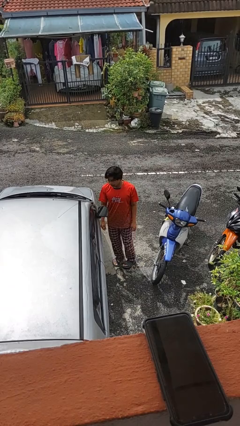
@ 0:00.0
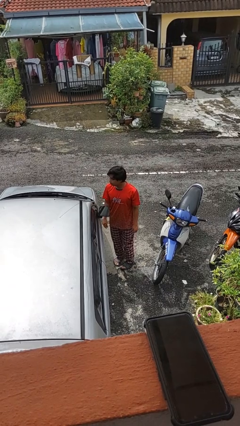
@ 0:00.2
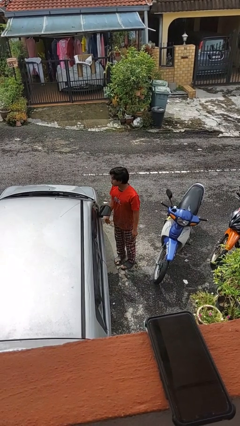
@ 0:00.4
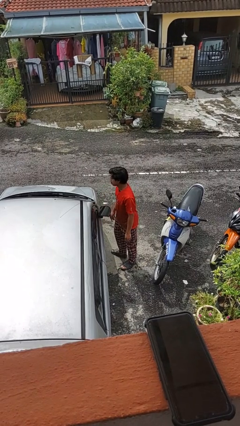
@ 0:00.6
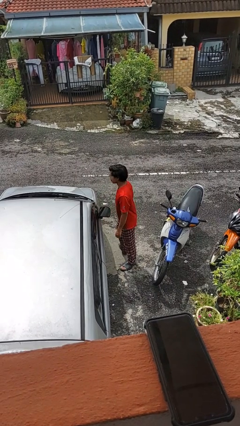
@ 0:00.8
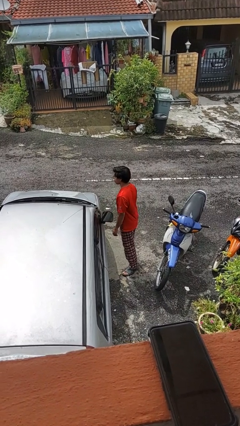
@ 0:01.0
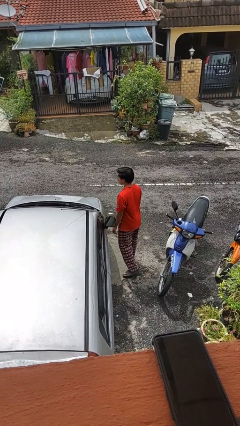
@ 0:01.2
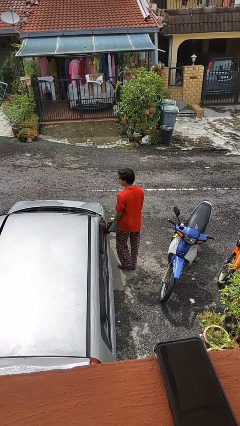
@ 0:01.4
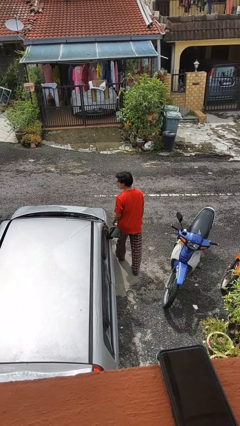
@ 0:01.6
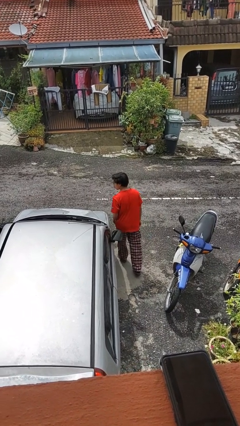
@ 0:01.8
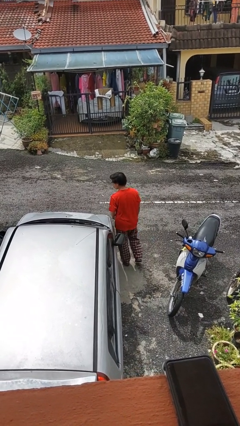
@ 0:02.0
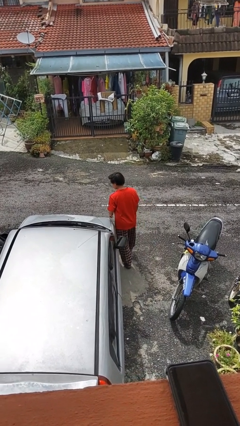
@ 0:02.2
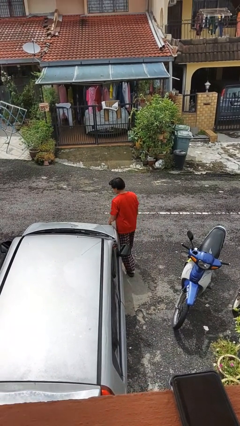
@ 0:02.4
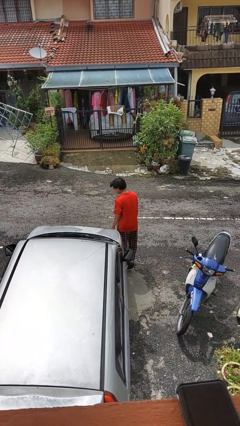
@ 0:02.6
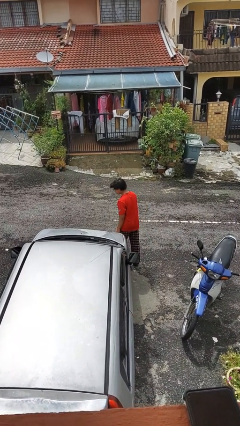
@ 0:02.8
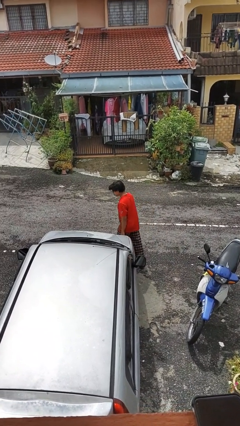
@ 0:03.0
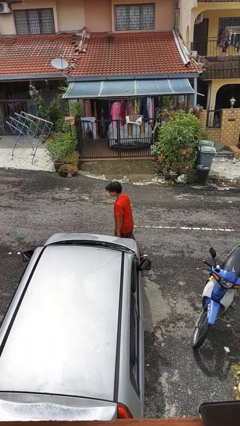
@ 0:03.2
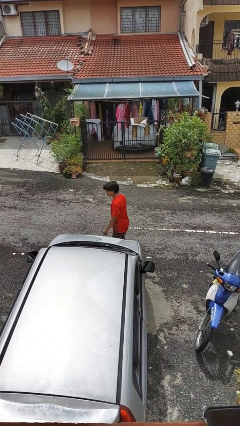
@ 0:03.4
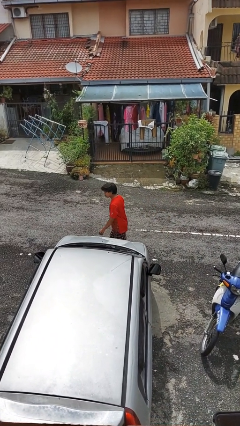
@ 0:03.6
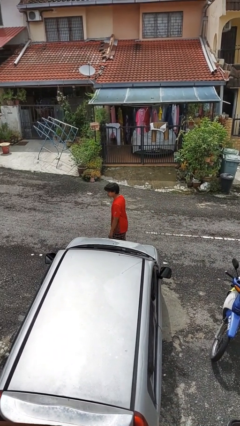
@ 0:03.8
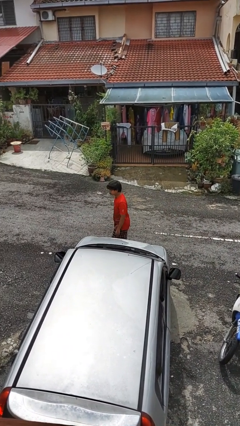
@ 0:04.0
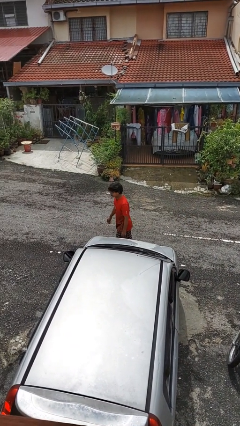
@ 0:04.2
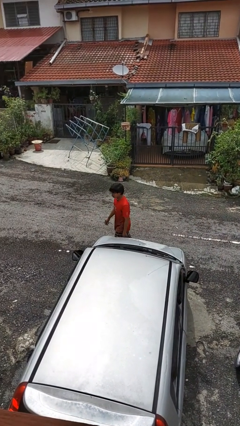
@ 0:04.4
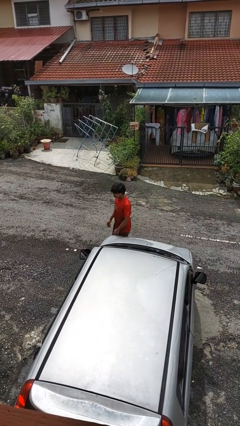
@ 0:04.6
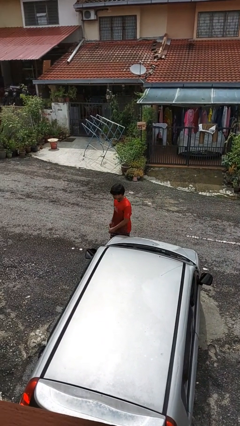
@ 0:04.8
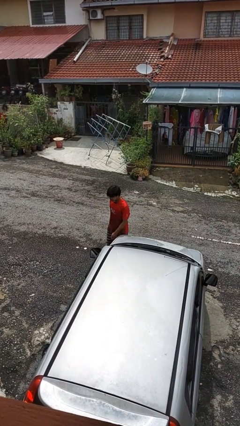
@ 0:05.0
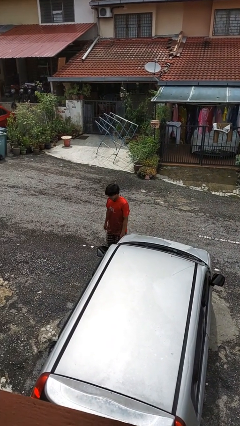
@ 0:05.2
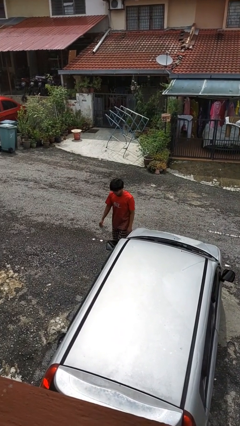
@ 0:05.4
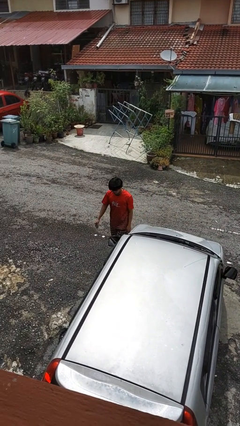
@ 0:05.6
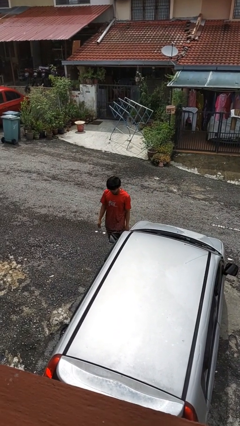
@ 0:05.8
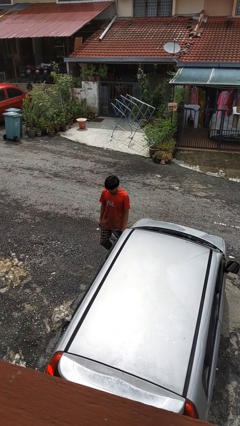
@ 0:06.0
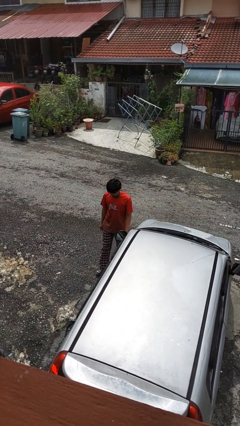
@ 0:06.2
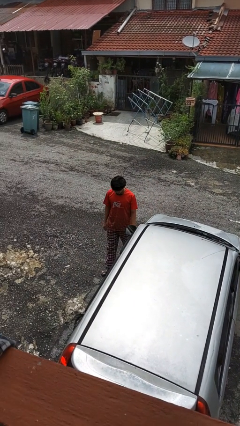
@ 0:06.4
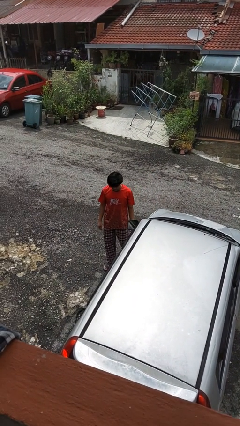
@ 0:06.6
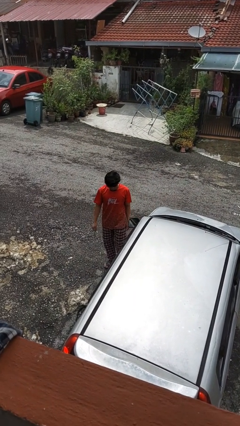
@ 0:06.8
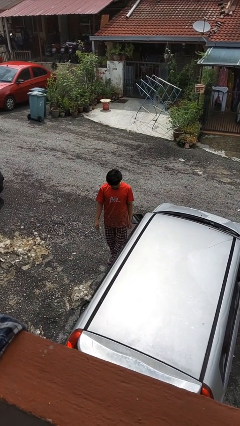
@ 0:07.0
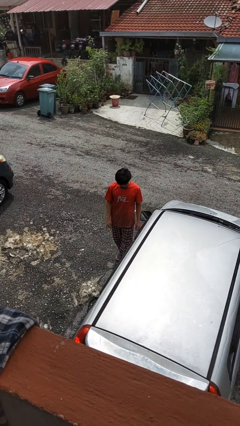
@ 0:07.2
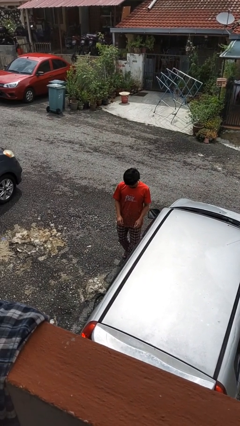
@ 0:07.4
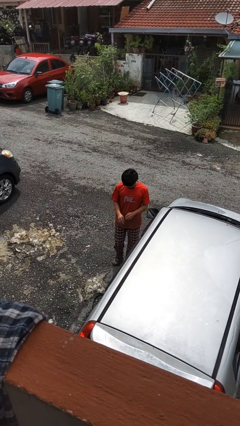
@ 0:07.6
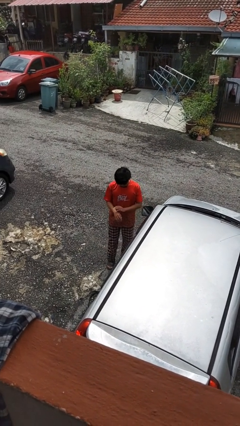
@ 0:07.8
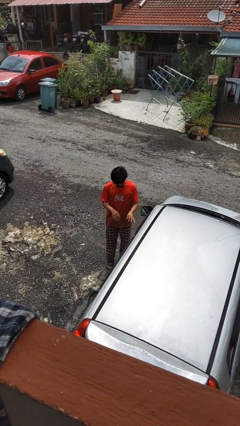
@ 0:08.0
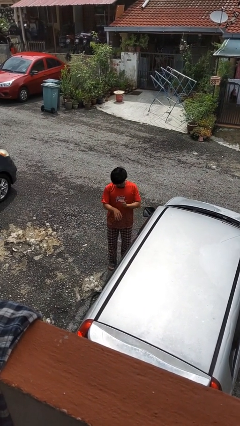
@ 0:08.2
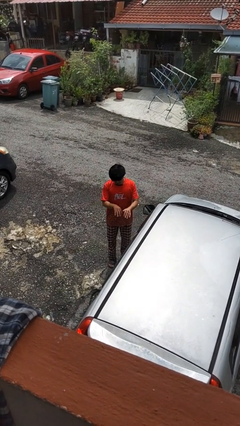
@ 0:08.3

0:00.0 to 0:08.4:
person walks around car

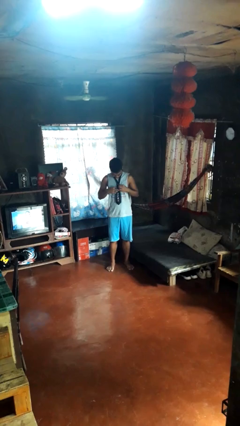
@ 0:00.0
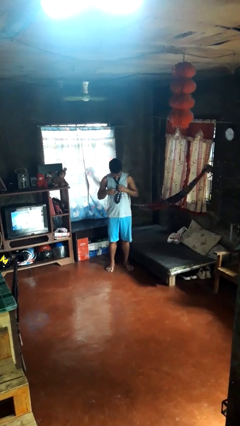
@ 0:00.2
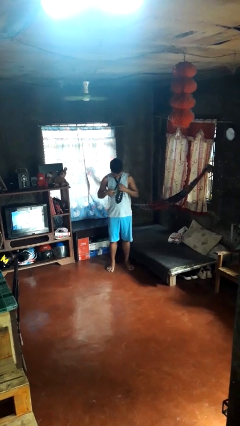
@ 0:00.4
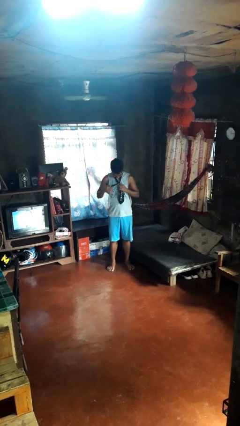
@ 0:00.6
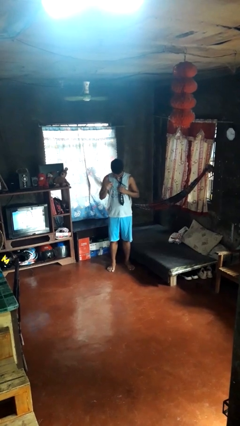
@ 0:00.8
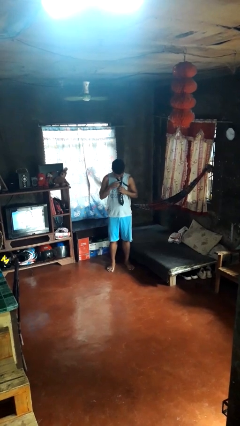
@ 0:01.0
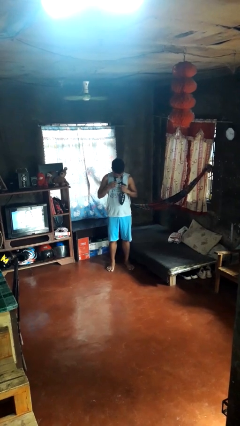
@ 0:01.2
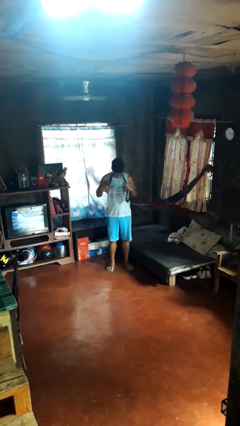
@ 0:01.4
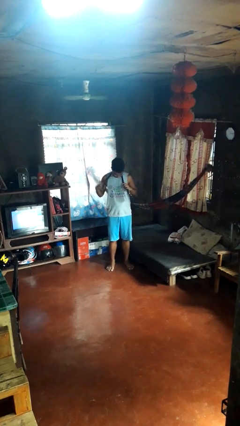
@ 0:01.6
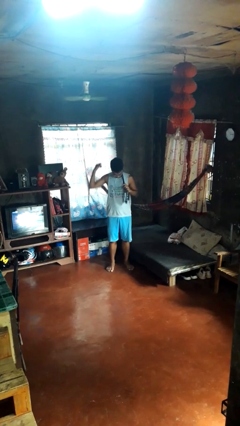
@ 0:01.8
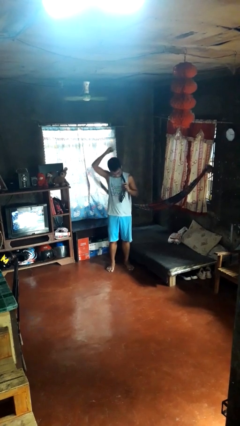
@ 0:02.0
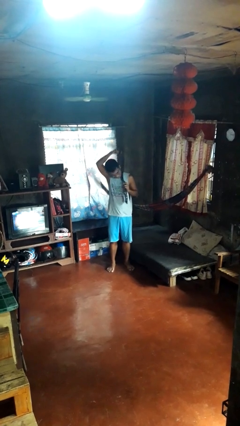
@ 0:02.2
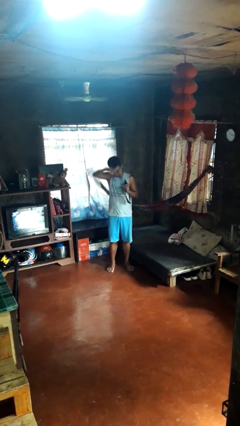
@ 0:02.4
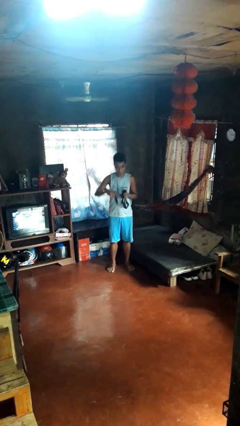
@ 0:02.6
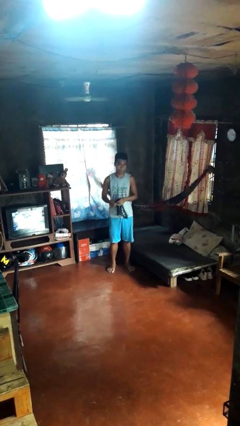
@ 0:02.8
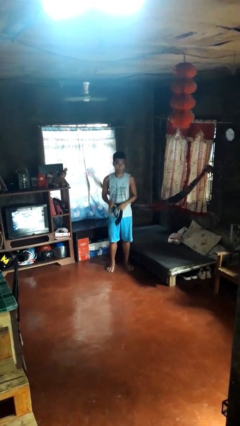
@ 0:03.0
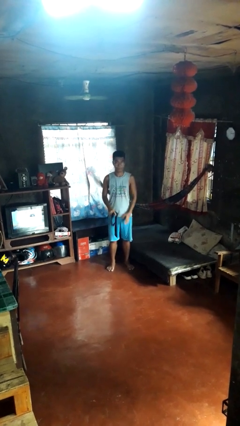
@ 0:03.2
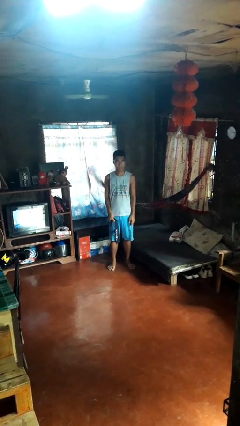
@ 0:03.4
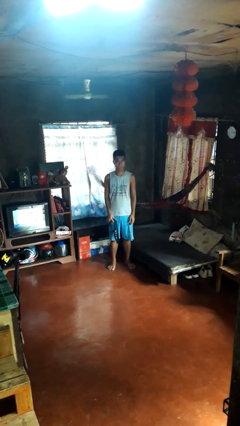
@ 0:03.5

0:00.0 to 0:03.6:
person takes off necktie

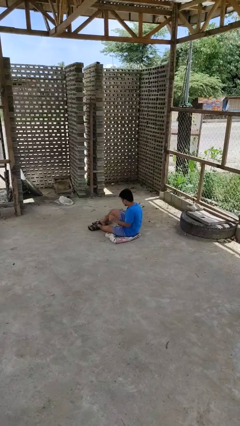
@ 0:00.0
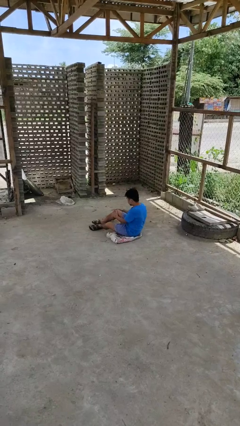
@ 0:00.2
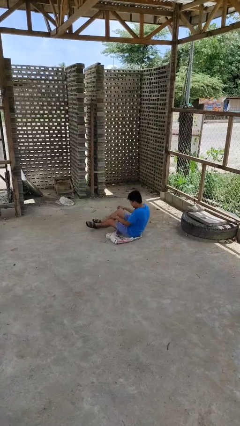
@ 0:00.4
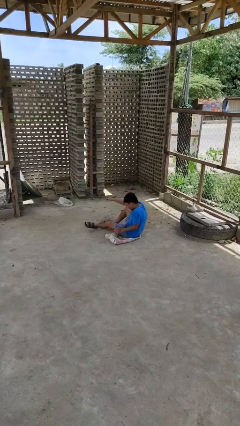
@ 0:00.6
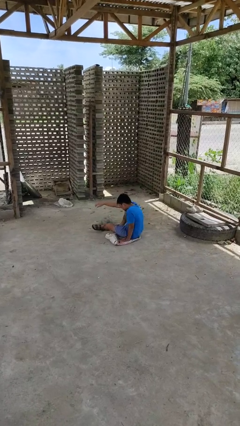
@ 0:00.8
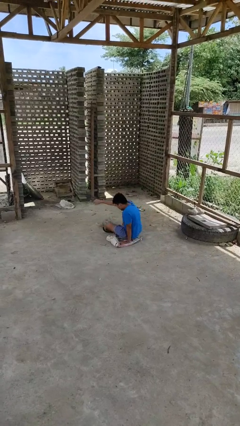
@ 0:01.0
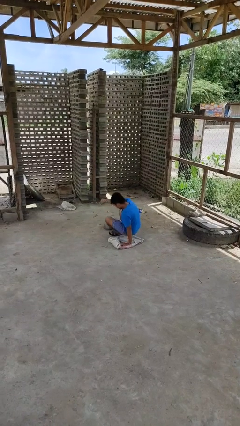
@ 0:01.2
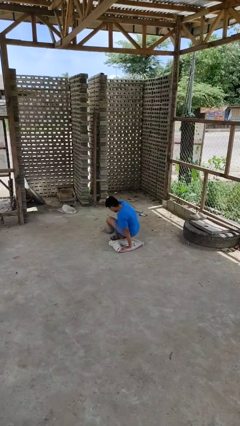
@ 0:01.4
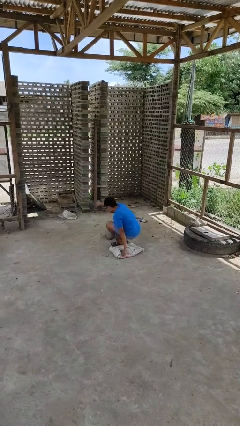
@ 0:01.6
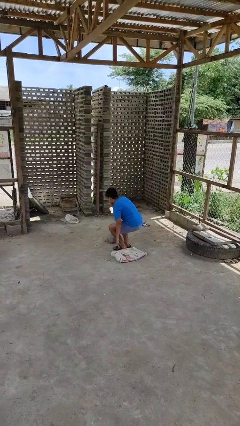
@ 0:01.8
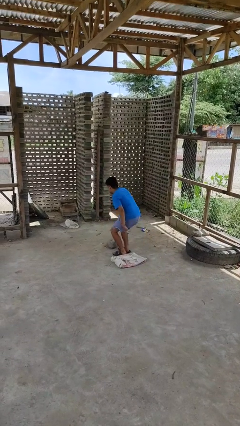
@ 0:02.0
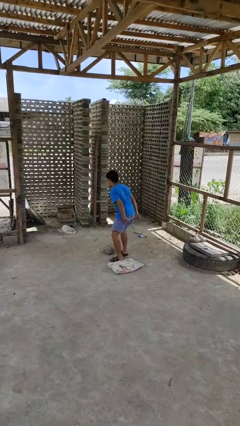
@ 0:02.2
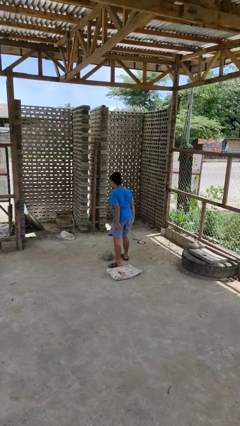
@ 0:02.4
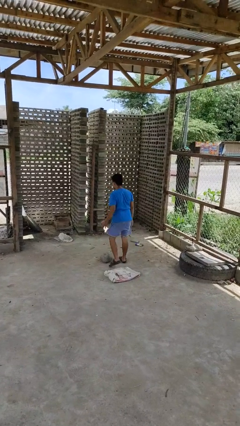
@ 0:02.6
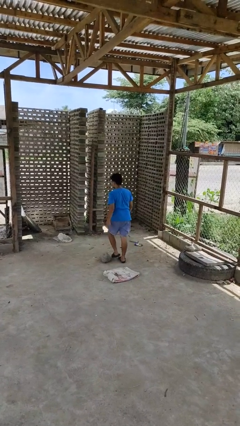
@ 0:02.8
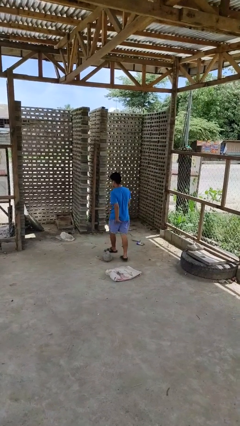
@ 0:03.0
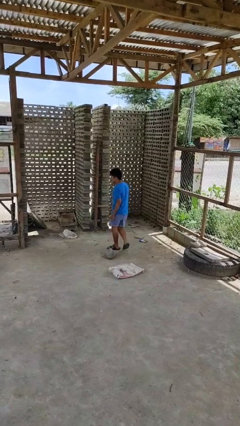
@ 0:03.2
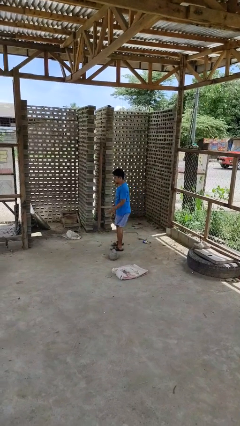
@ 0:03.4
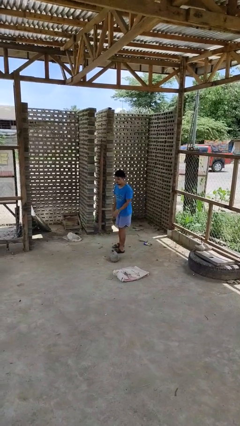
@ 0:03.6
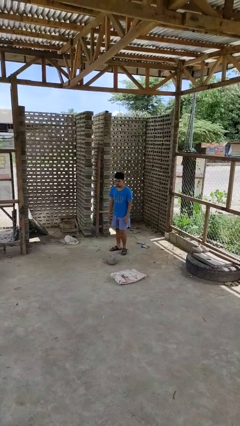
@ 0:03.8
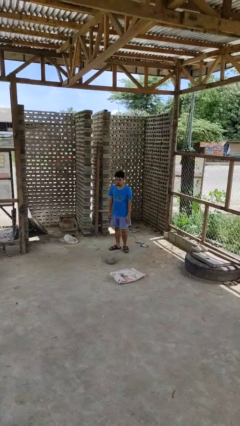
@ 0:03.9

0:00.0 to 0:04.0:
person stands up from floor

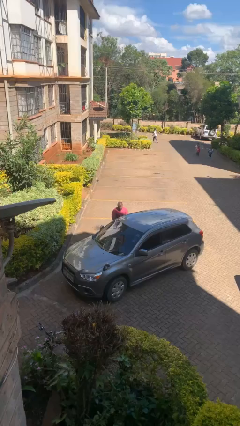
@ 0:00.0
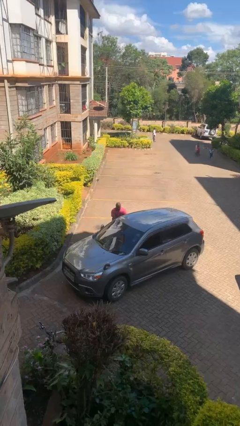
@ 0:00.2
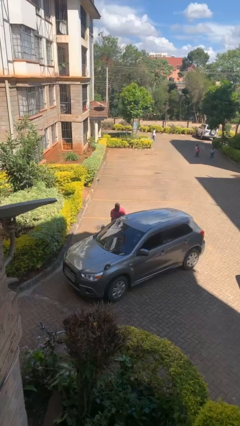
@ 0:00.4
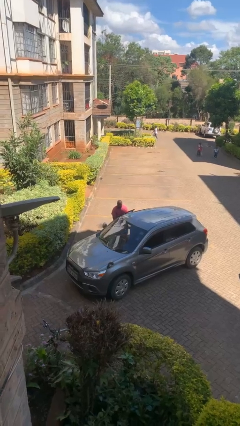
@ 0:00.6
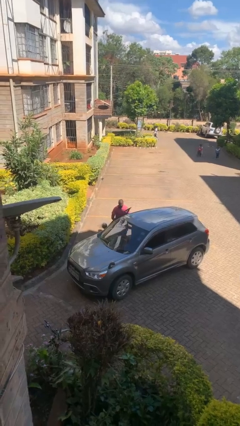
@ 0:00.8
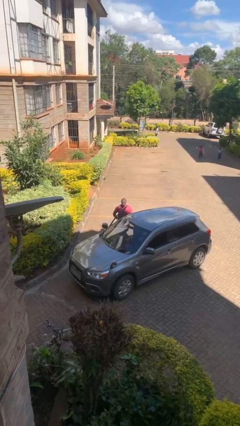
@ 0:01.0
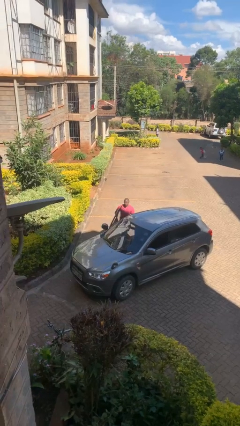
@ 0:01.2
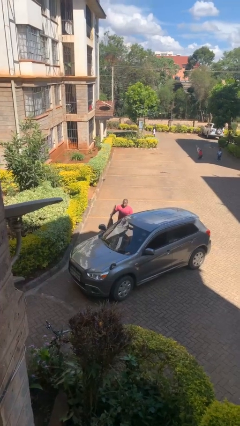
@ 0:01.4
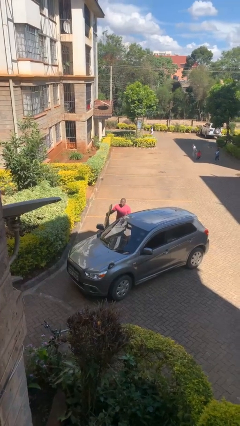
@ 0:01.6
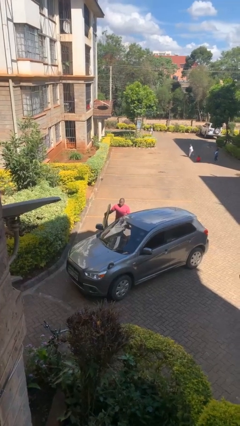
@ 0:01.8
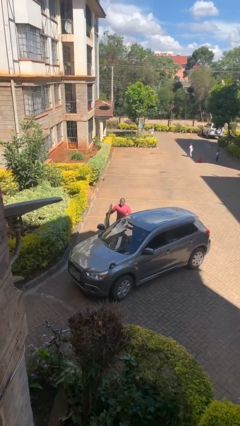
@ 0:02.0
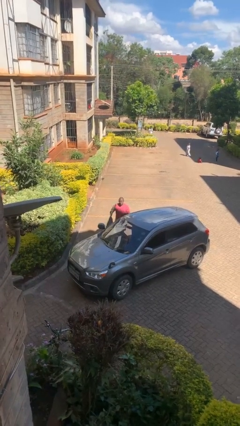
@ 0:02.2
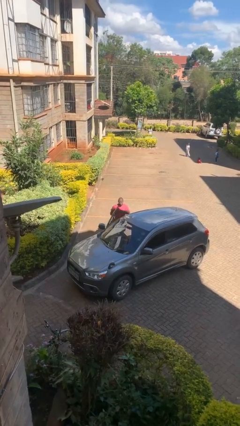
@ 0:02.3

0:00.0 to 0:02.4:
person opens car door
